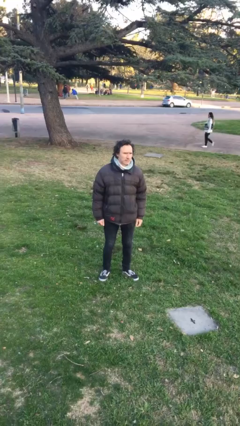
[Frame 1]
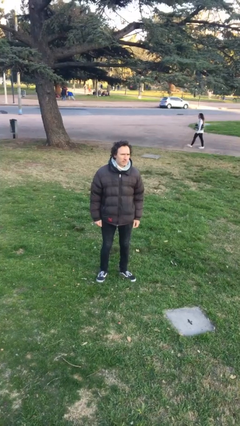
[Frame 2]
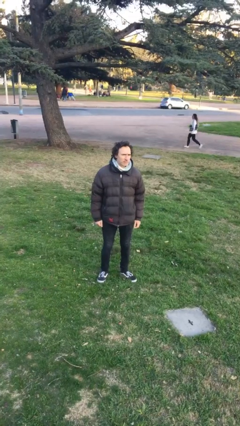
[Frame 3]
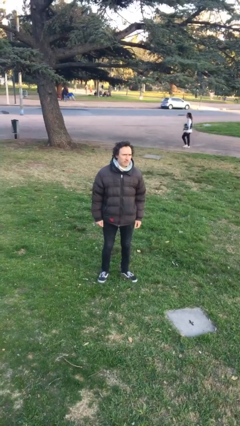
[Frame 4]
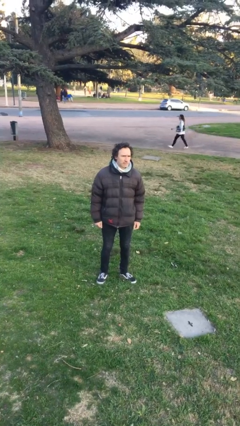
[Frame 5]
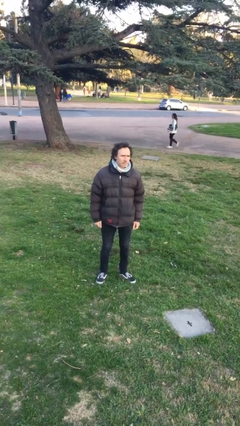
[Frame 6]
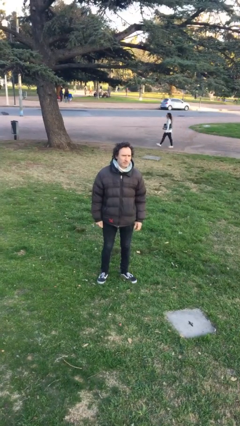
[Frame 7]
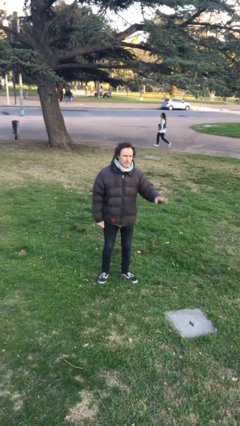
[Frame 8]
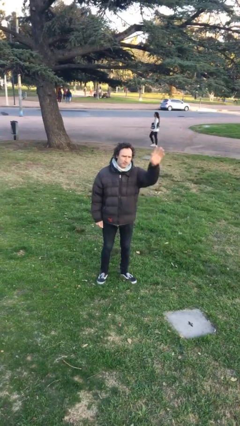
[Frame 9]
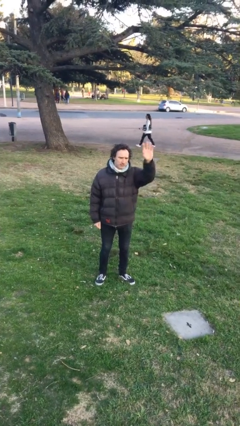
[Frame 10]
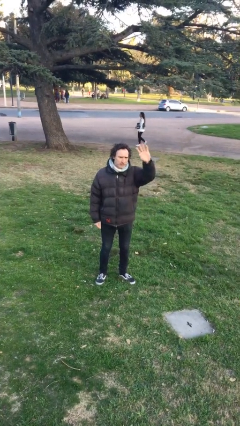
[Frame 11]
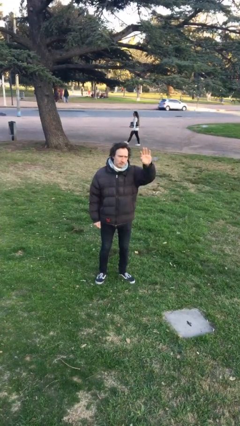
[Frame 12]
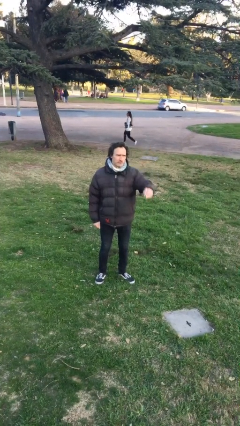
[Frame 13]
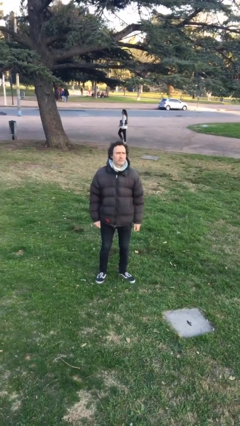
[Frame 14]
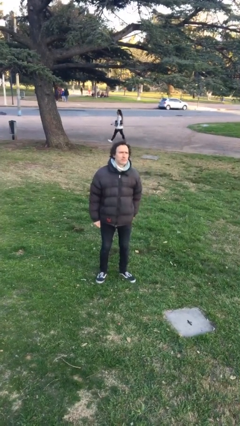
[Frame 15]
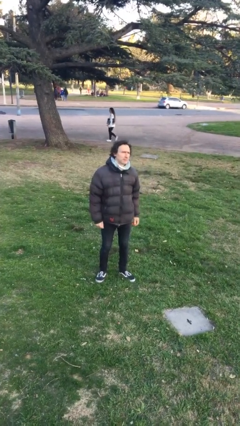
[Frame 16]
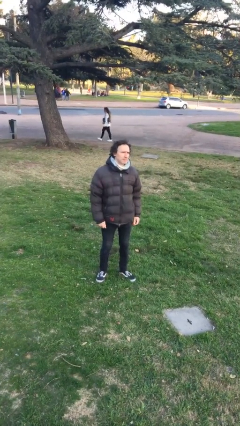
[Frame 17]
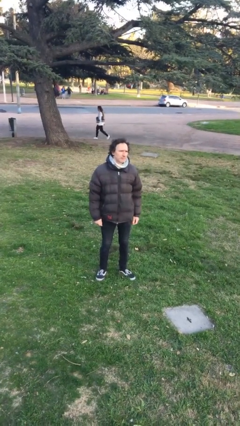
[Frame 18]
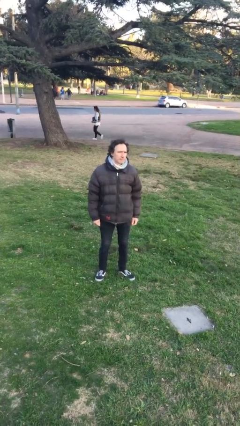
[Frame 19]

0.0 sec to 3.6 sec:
person waves at person

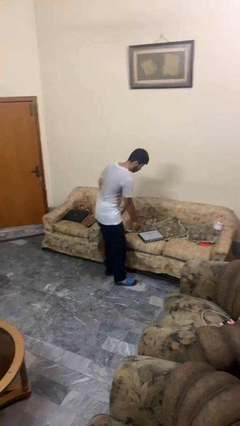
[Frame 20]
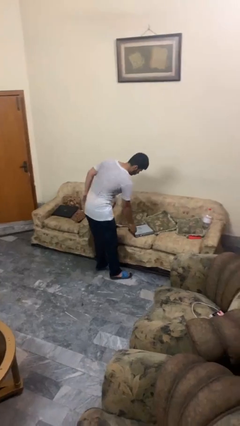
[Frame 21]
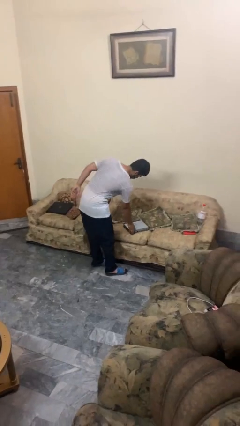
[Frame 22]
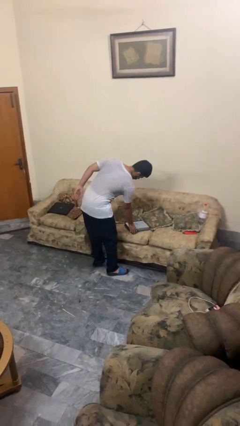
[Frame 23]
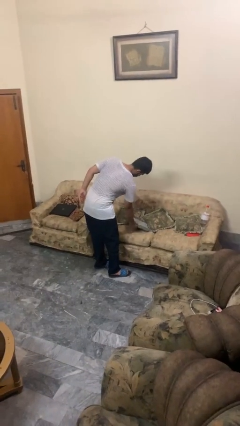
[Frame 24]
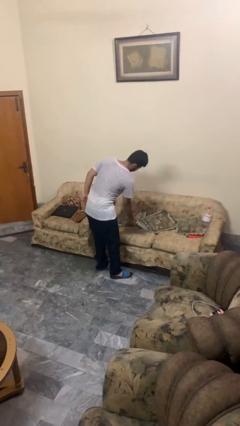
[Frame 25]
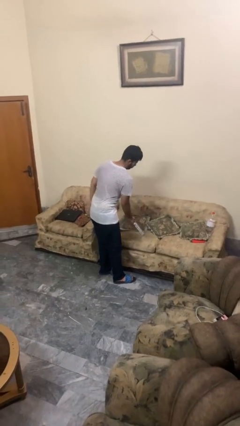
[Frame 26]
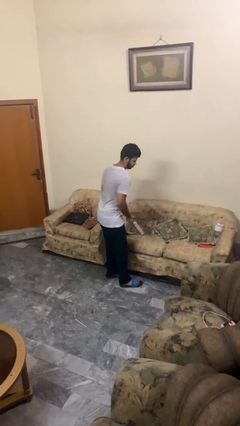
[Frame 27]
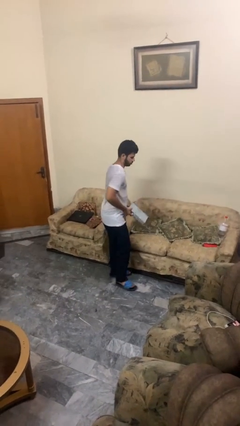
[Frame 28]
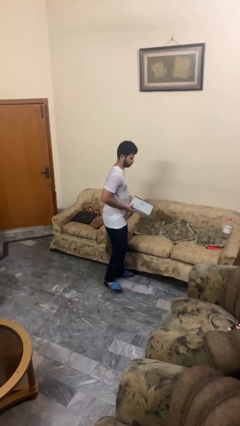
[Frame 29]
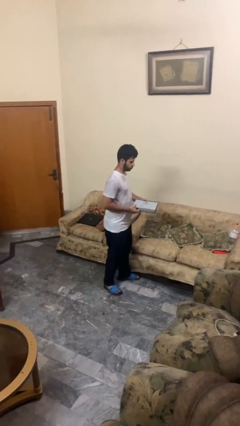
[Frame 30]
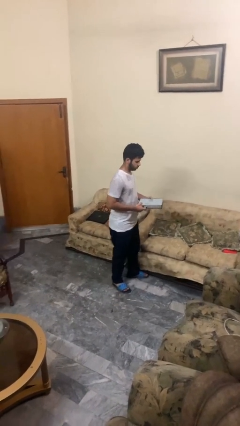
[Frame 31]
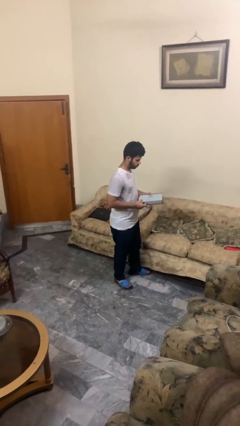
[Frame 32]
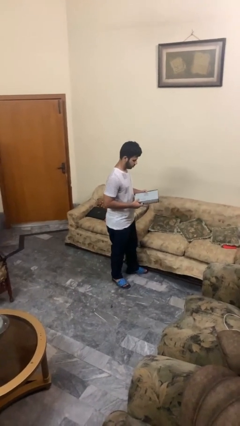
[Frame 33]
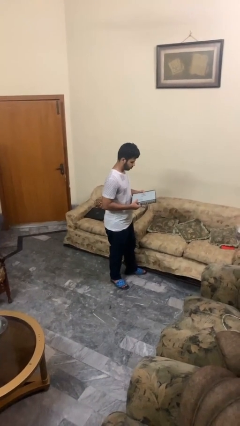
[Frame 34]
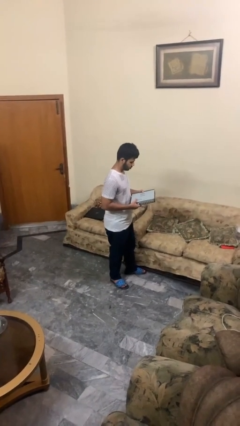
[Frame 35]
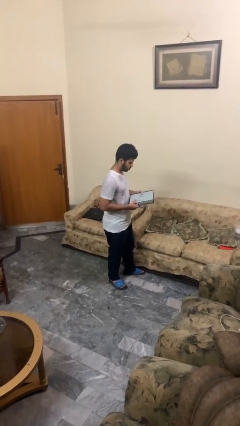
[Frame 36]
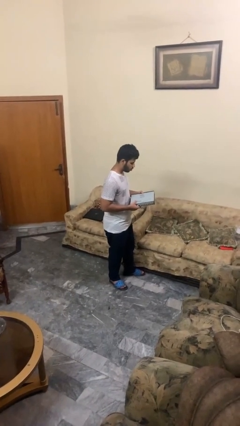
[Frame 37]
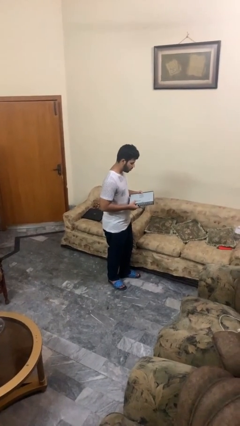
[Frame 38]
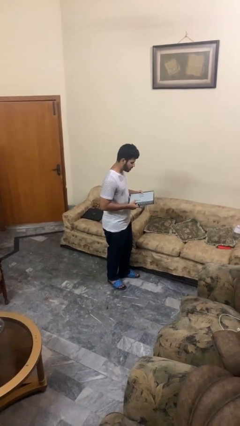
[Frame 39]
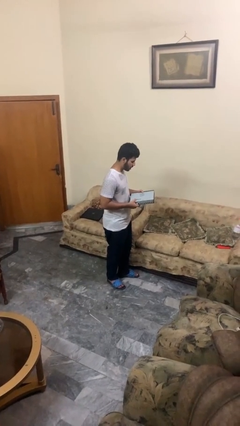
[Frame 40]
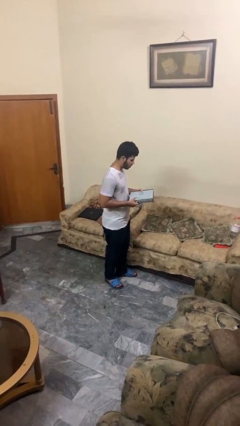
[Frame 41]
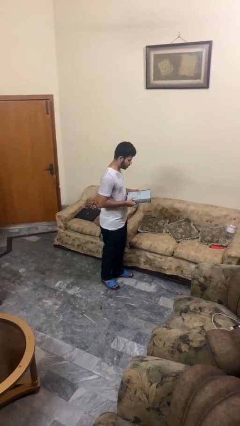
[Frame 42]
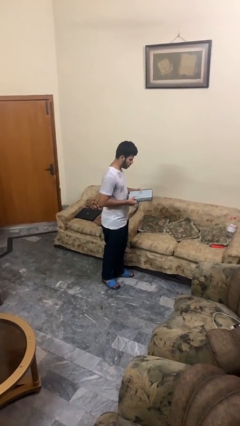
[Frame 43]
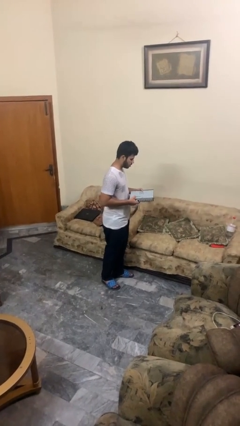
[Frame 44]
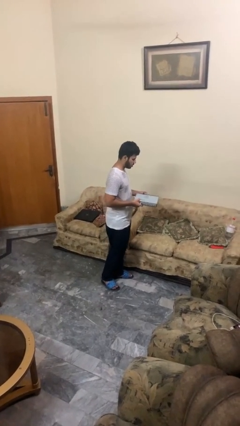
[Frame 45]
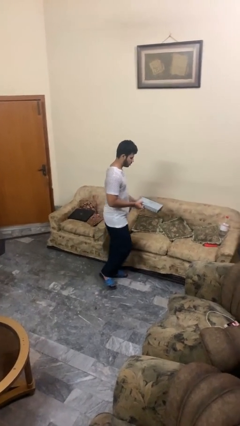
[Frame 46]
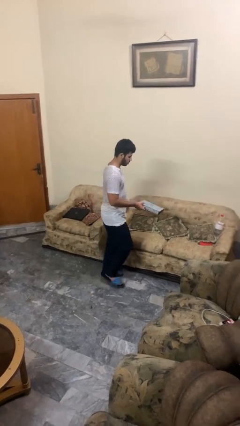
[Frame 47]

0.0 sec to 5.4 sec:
person picks up object from couch

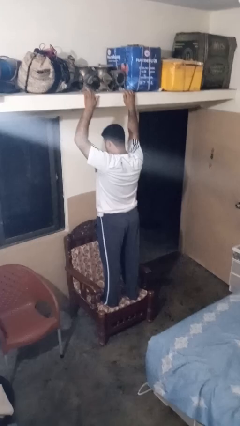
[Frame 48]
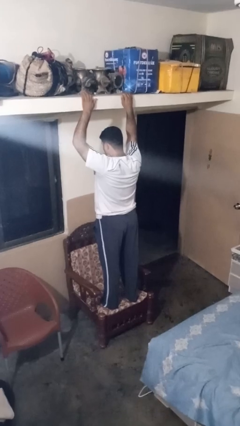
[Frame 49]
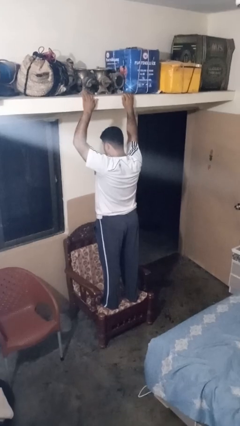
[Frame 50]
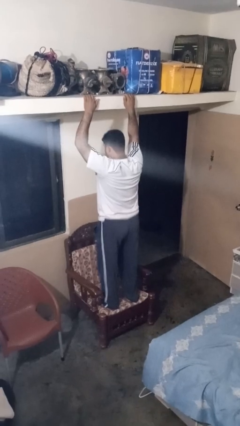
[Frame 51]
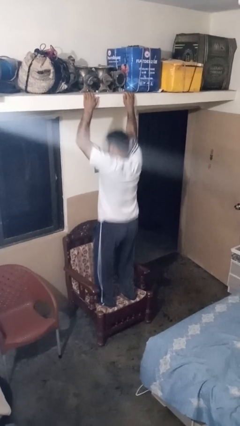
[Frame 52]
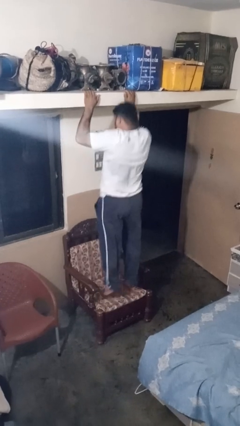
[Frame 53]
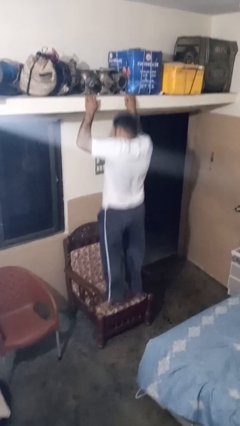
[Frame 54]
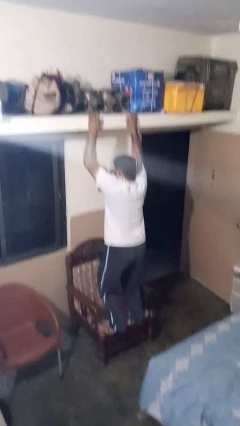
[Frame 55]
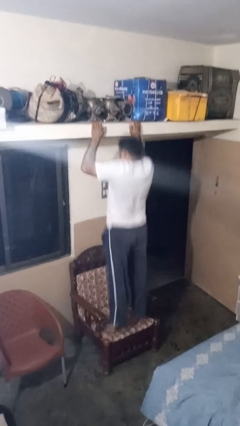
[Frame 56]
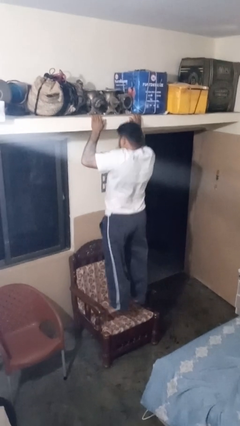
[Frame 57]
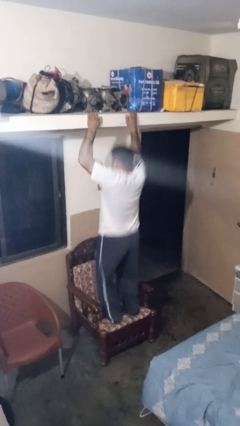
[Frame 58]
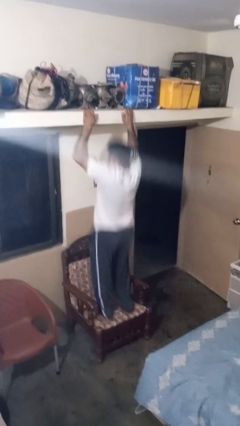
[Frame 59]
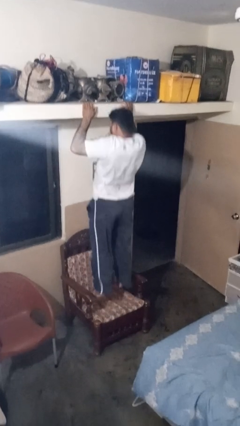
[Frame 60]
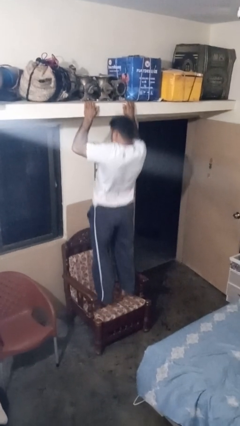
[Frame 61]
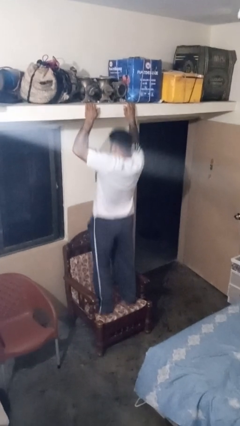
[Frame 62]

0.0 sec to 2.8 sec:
person jumps on couch

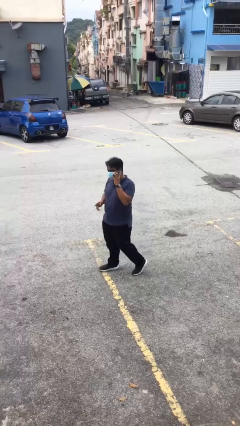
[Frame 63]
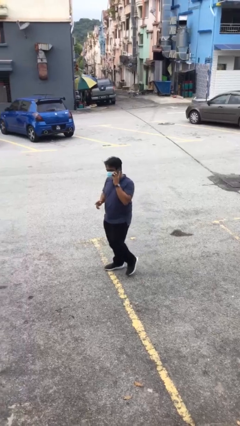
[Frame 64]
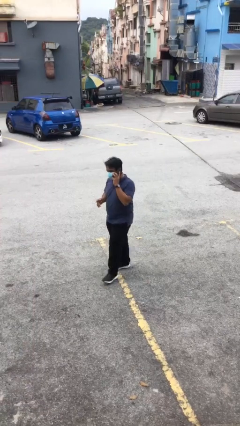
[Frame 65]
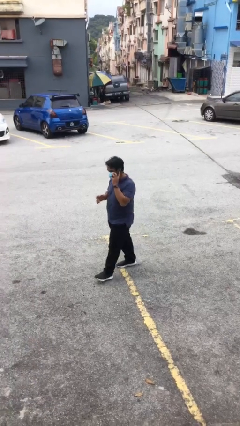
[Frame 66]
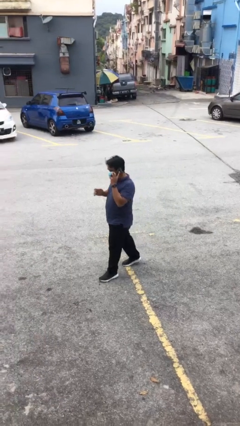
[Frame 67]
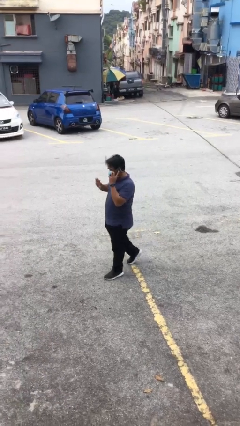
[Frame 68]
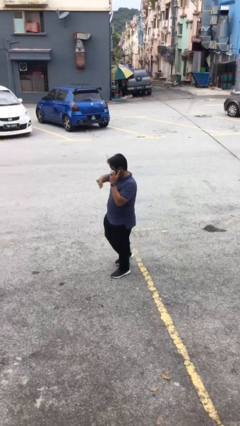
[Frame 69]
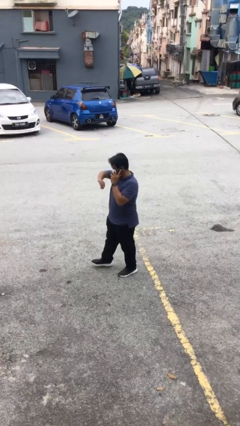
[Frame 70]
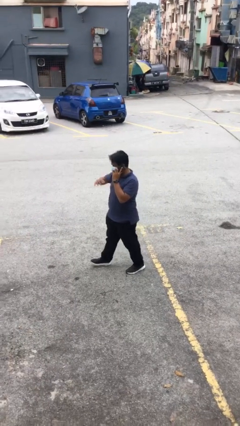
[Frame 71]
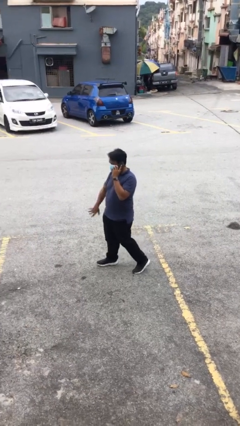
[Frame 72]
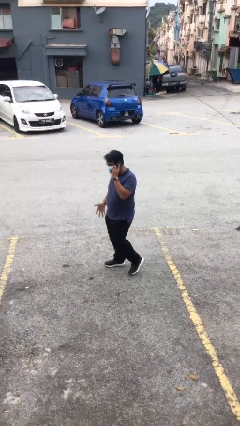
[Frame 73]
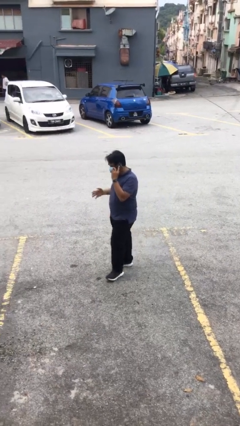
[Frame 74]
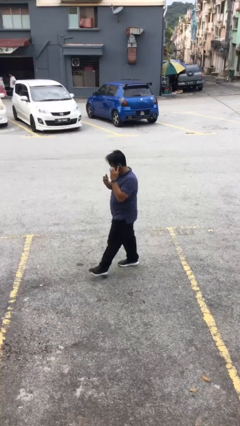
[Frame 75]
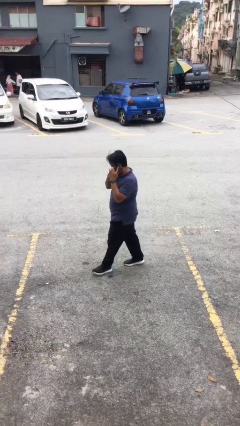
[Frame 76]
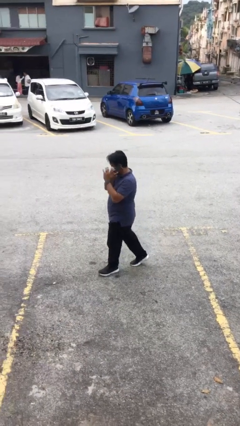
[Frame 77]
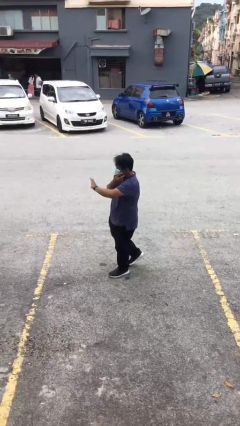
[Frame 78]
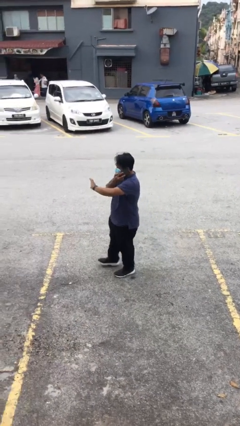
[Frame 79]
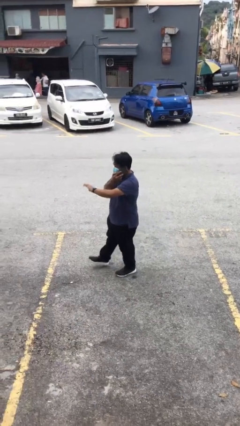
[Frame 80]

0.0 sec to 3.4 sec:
person talks on phone

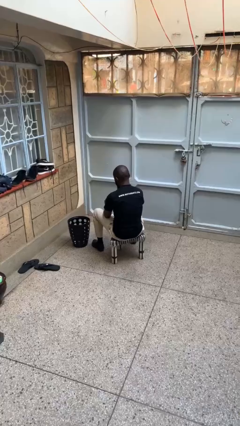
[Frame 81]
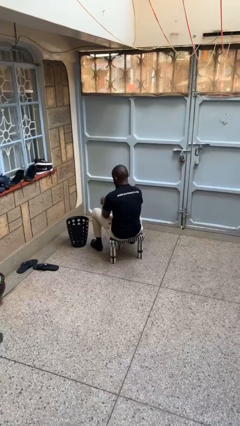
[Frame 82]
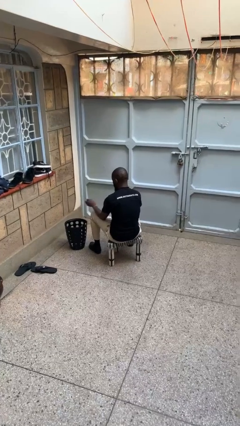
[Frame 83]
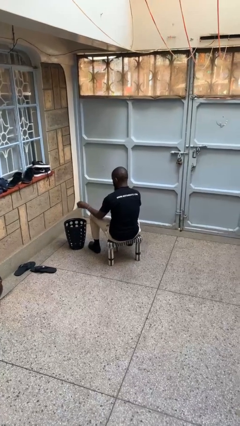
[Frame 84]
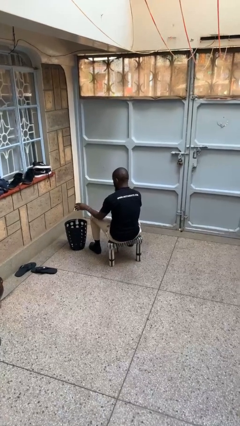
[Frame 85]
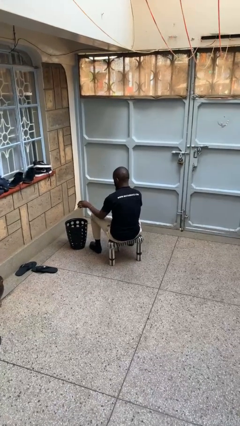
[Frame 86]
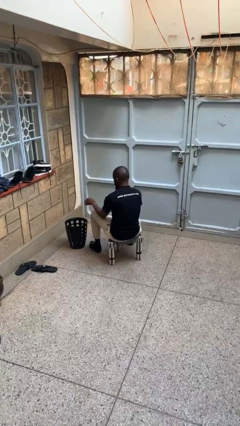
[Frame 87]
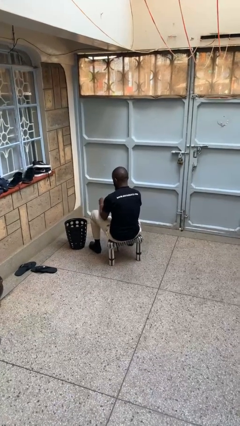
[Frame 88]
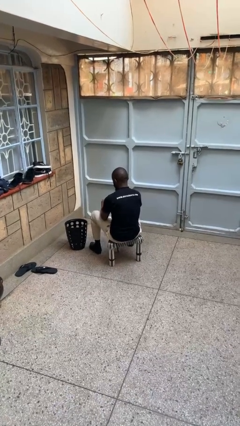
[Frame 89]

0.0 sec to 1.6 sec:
person discards trash

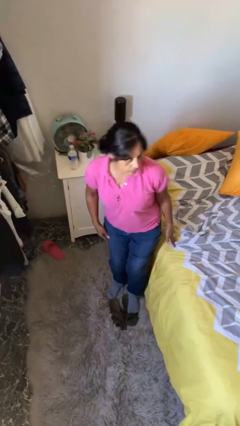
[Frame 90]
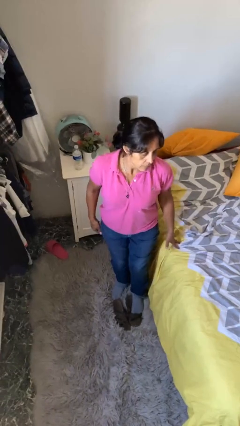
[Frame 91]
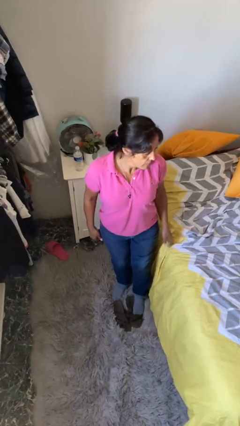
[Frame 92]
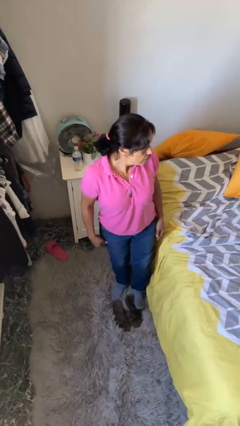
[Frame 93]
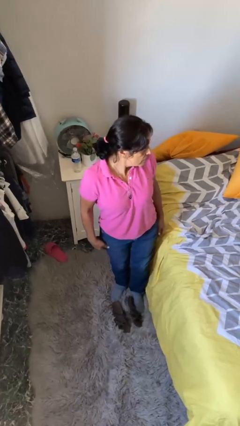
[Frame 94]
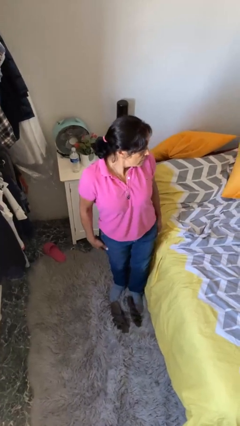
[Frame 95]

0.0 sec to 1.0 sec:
person stands up
